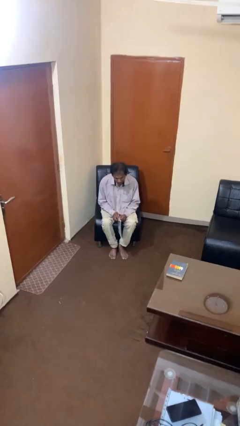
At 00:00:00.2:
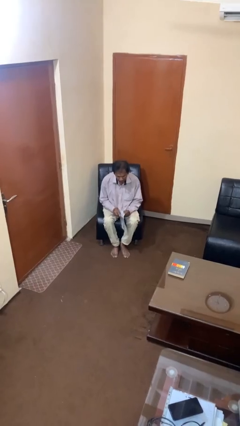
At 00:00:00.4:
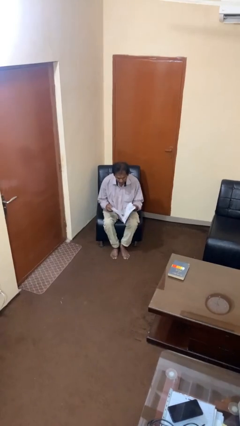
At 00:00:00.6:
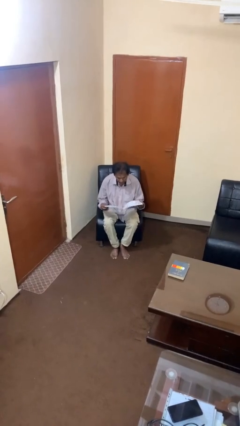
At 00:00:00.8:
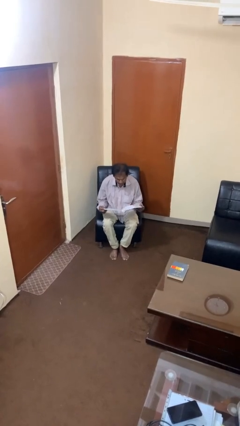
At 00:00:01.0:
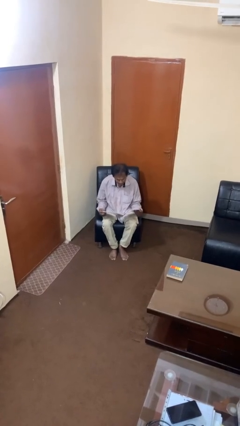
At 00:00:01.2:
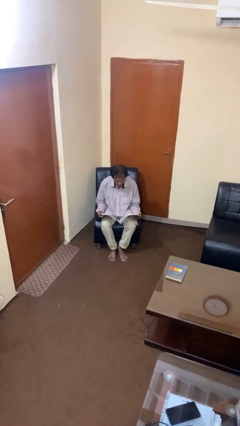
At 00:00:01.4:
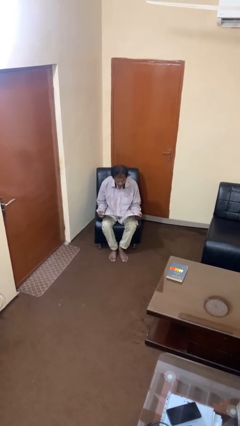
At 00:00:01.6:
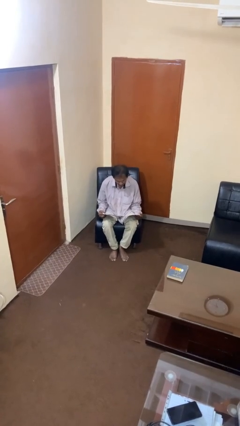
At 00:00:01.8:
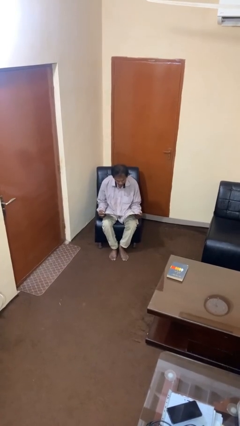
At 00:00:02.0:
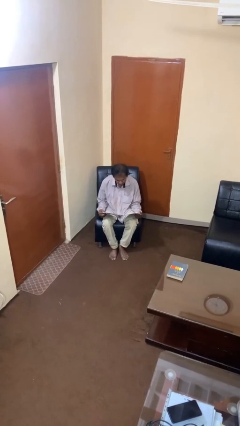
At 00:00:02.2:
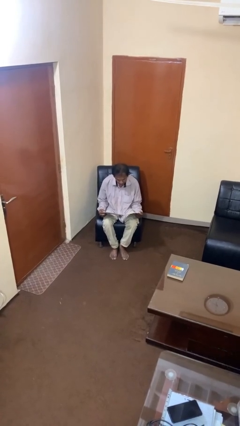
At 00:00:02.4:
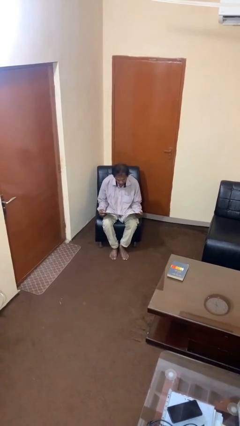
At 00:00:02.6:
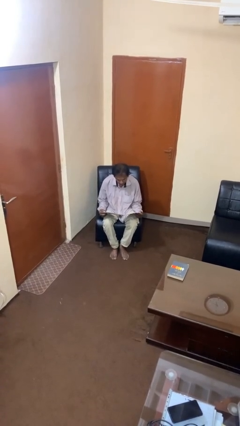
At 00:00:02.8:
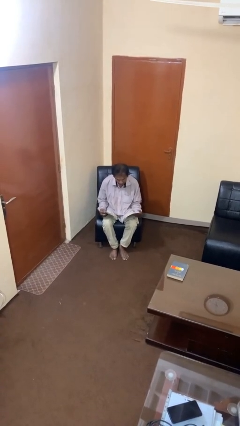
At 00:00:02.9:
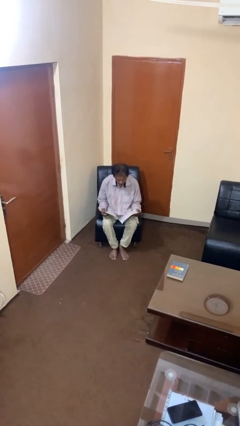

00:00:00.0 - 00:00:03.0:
person reads magazine

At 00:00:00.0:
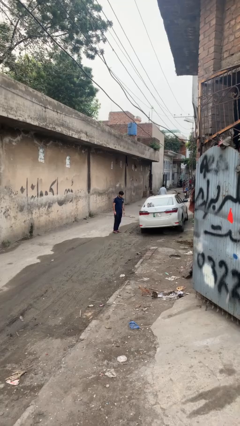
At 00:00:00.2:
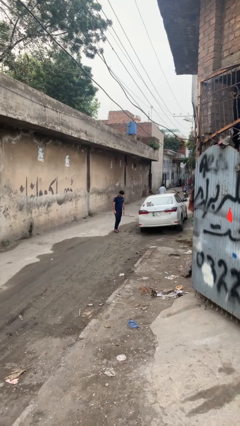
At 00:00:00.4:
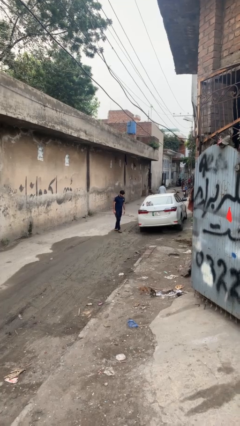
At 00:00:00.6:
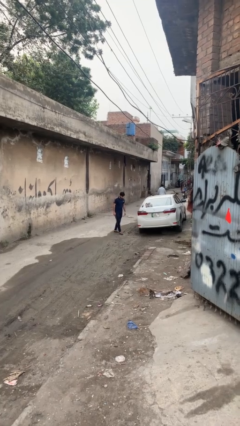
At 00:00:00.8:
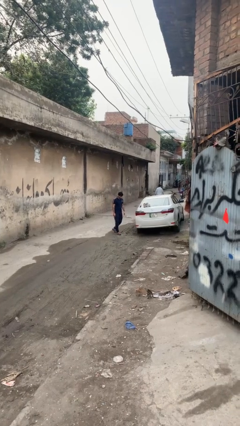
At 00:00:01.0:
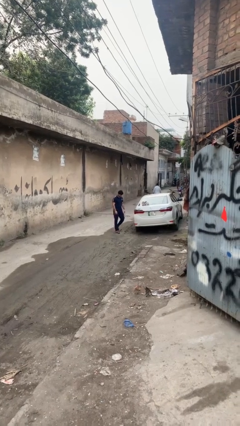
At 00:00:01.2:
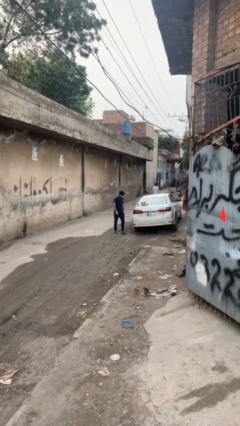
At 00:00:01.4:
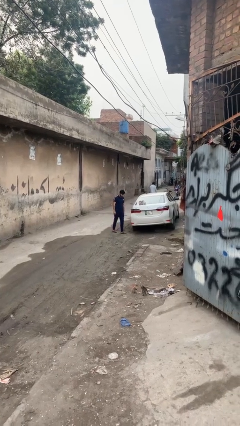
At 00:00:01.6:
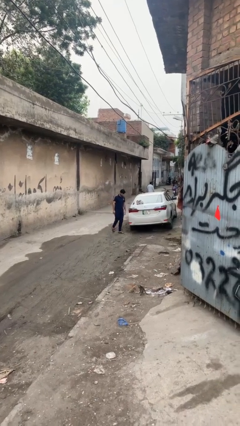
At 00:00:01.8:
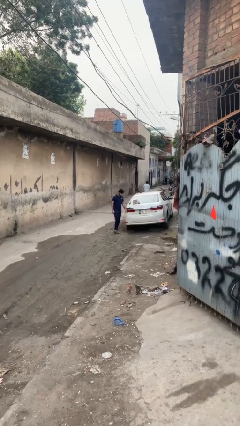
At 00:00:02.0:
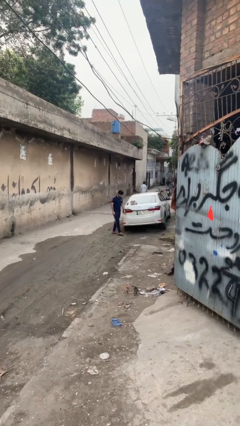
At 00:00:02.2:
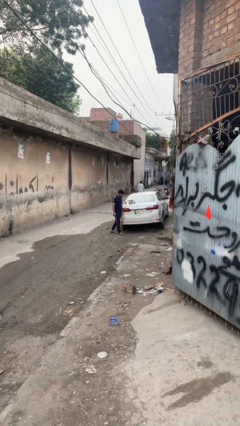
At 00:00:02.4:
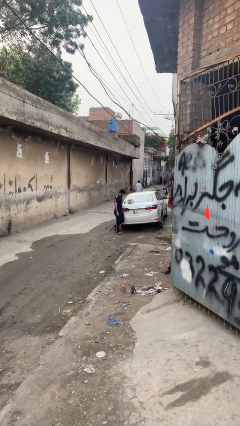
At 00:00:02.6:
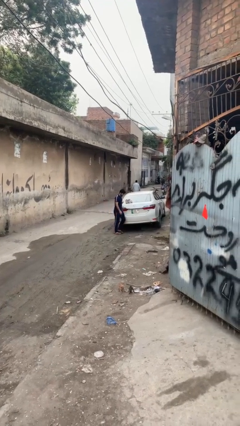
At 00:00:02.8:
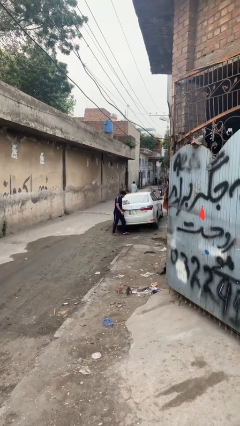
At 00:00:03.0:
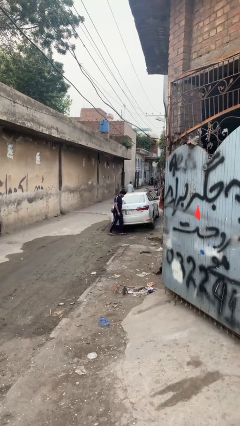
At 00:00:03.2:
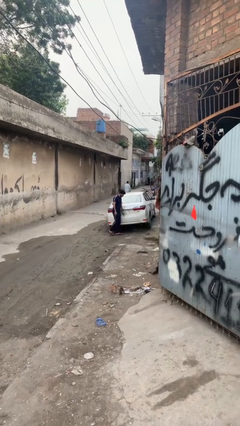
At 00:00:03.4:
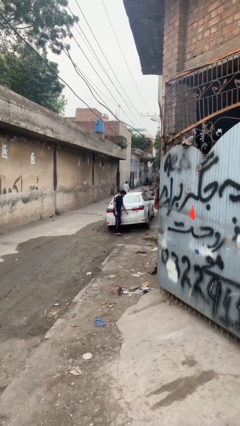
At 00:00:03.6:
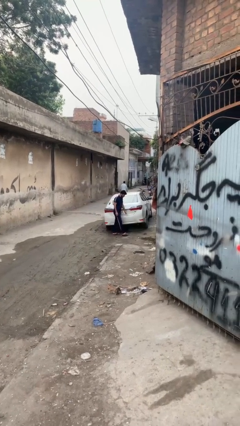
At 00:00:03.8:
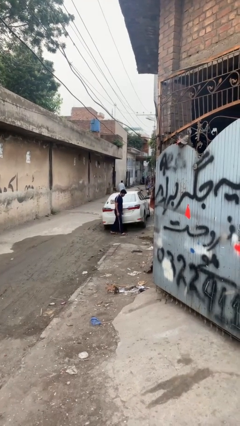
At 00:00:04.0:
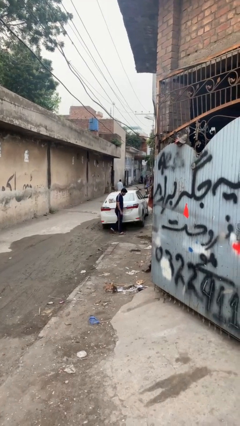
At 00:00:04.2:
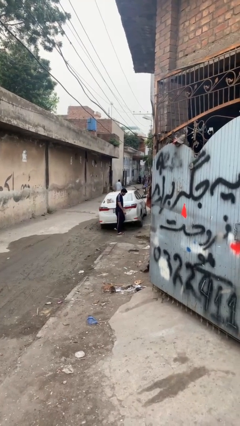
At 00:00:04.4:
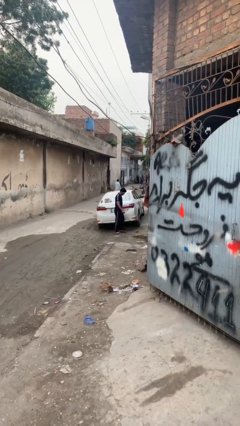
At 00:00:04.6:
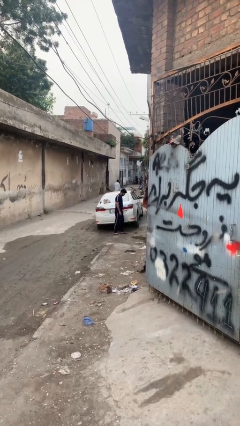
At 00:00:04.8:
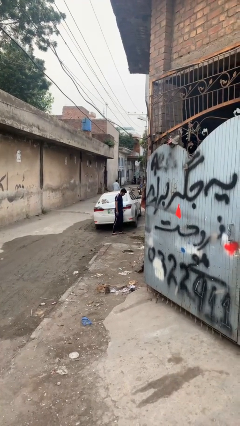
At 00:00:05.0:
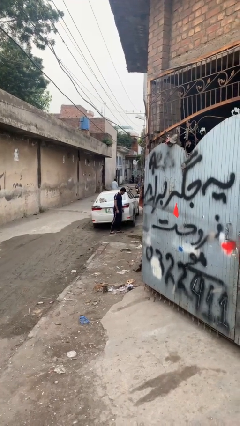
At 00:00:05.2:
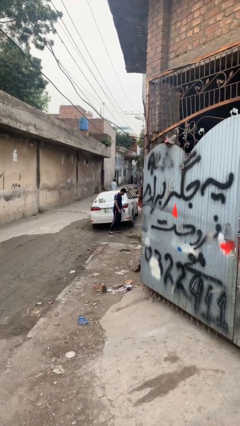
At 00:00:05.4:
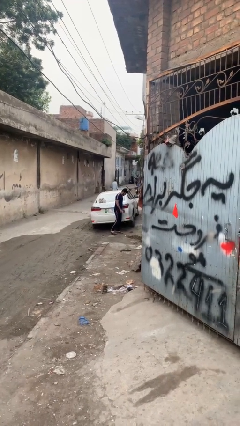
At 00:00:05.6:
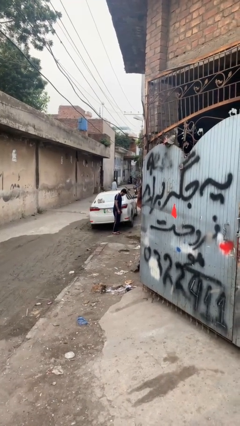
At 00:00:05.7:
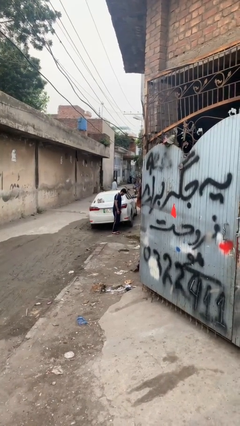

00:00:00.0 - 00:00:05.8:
person walks around car

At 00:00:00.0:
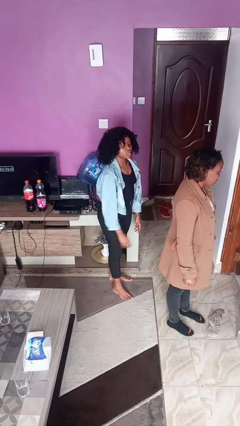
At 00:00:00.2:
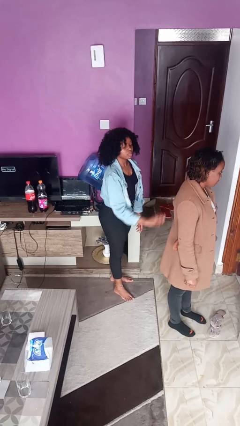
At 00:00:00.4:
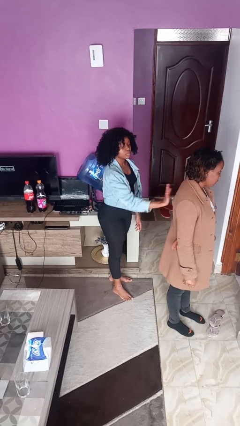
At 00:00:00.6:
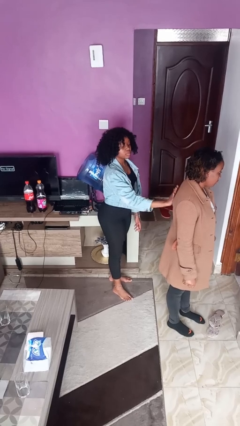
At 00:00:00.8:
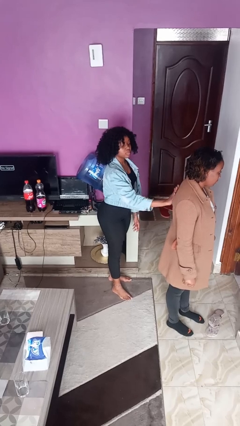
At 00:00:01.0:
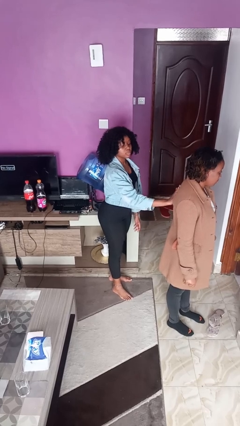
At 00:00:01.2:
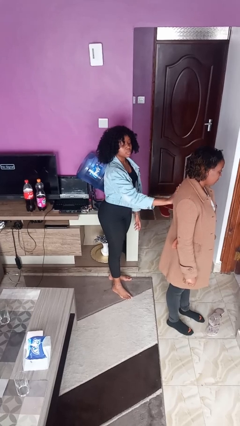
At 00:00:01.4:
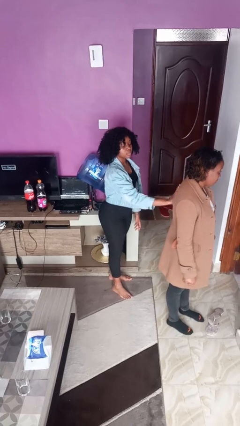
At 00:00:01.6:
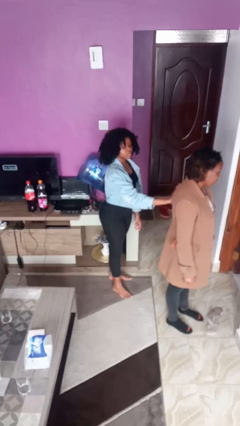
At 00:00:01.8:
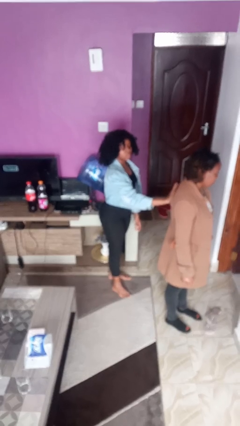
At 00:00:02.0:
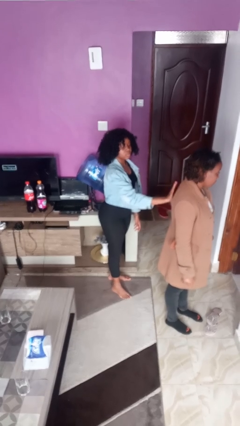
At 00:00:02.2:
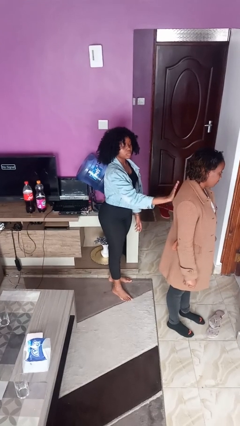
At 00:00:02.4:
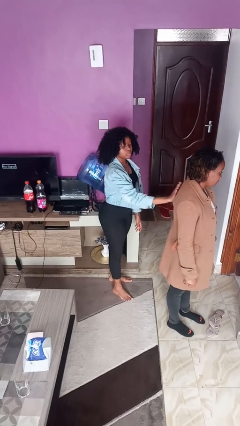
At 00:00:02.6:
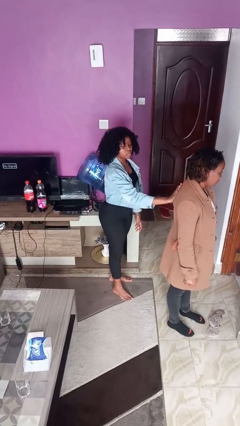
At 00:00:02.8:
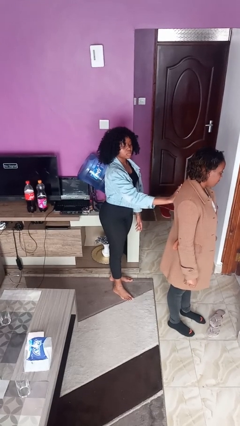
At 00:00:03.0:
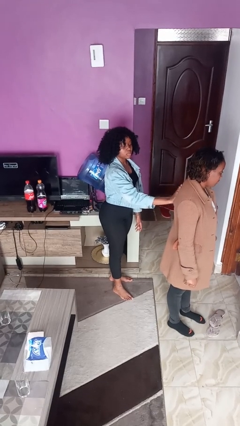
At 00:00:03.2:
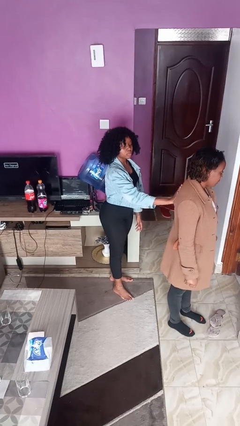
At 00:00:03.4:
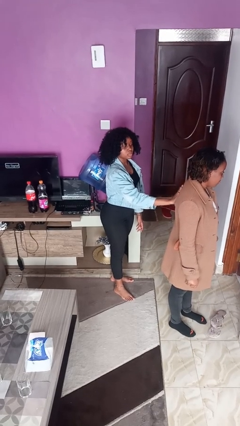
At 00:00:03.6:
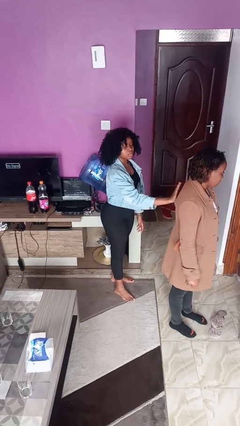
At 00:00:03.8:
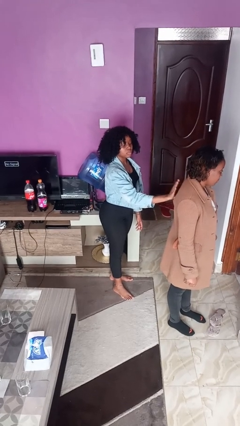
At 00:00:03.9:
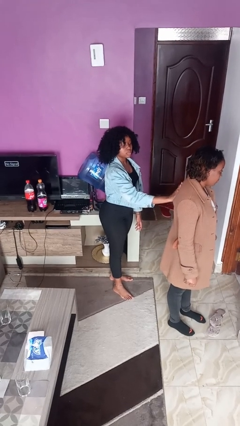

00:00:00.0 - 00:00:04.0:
person touches back of person

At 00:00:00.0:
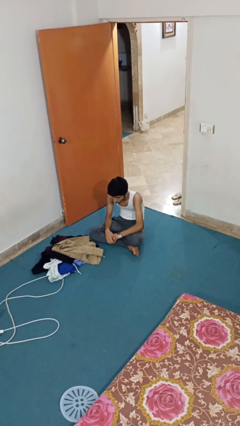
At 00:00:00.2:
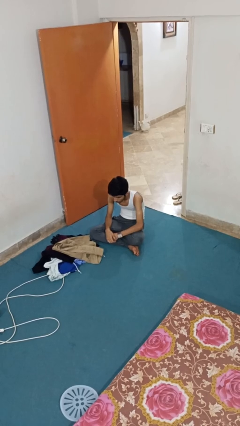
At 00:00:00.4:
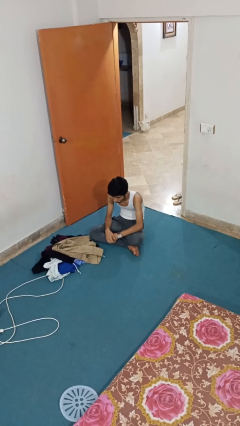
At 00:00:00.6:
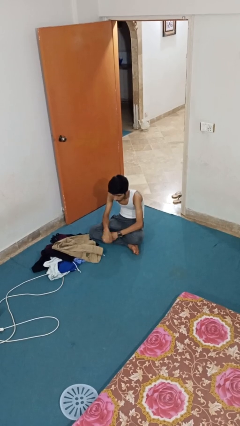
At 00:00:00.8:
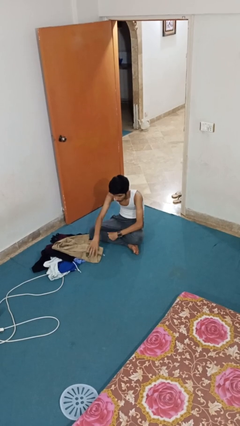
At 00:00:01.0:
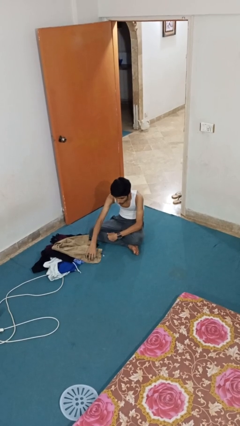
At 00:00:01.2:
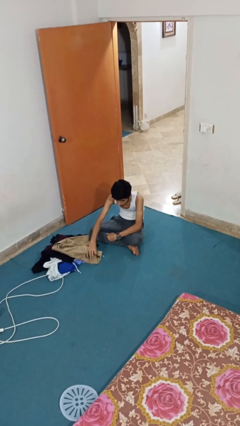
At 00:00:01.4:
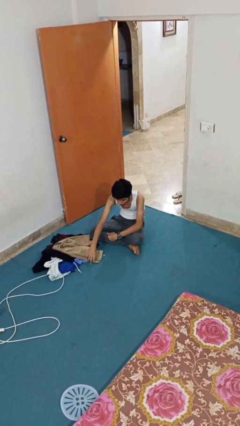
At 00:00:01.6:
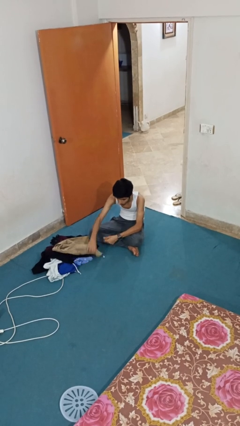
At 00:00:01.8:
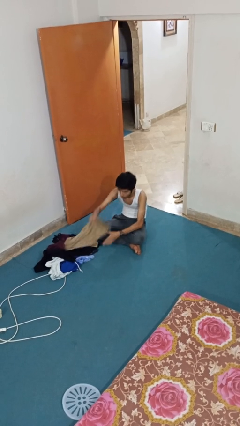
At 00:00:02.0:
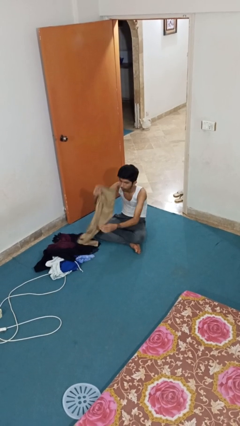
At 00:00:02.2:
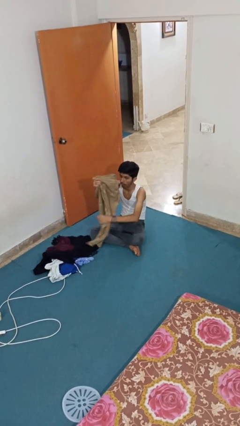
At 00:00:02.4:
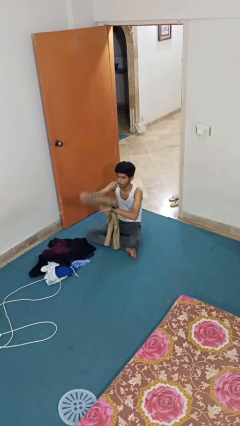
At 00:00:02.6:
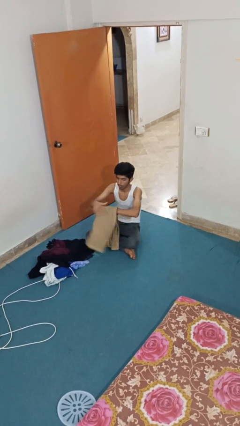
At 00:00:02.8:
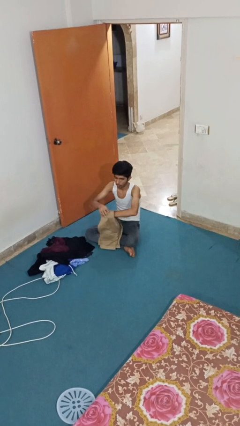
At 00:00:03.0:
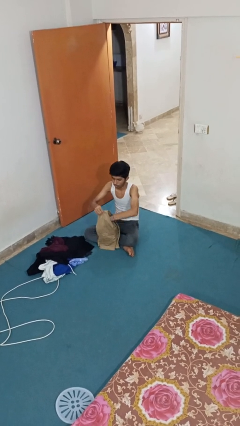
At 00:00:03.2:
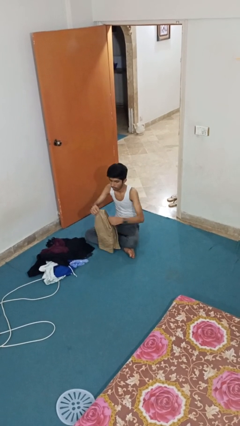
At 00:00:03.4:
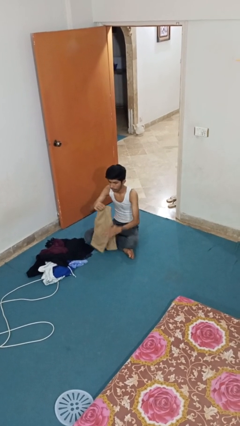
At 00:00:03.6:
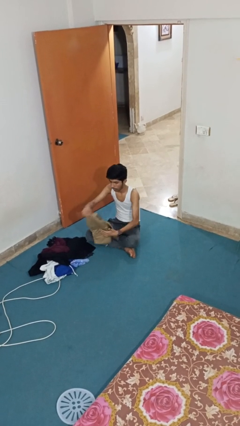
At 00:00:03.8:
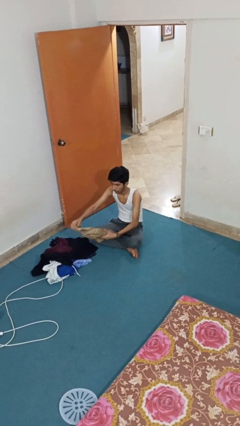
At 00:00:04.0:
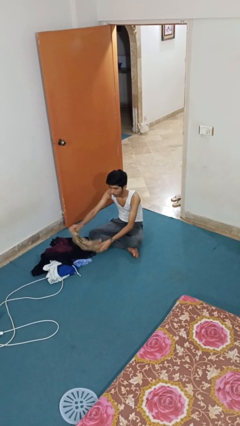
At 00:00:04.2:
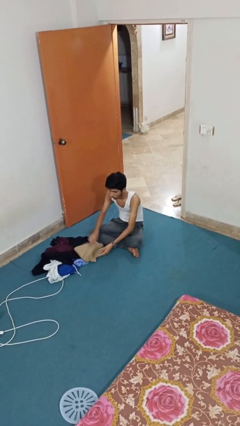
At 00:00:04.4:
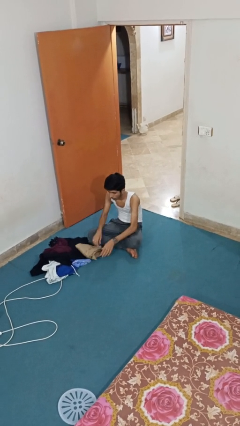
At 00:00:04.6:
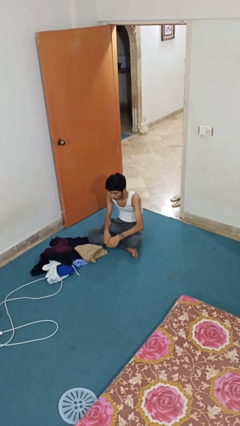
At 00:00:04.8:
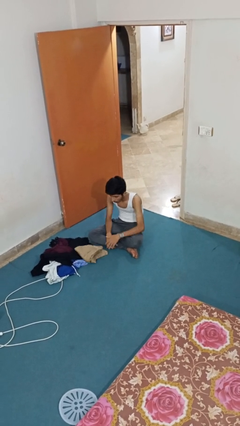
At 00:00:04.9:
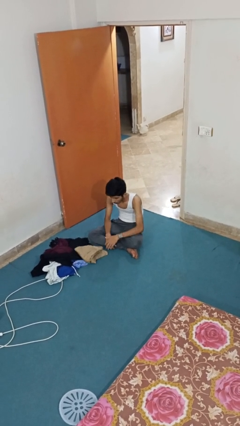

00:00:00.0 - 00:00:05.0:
person folds pants
